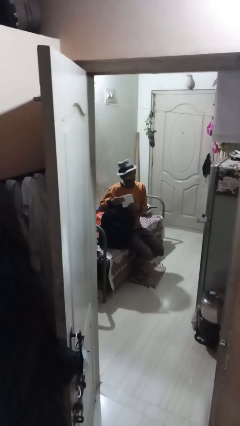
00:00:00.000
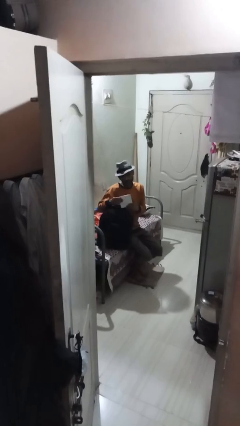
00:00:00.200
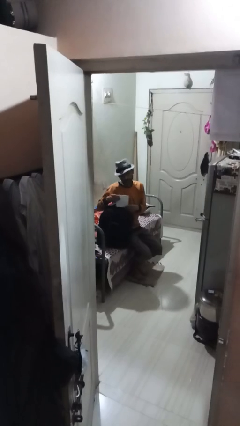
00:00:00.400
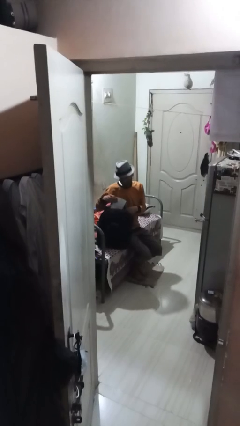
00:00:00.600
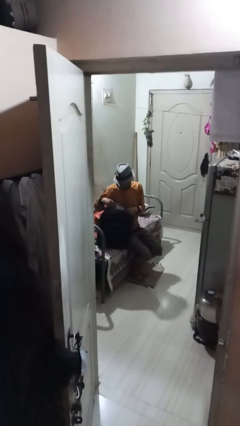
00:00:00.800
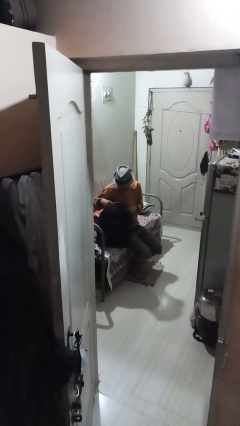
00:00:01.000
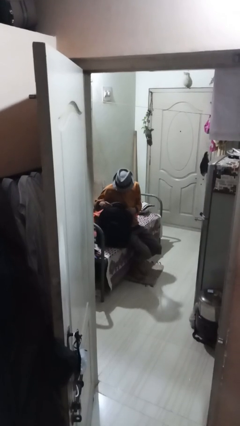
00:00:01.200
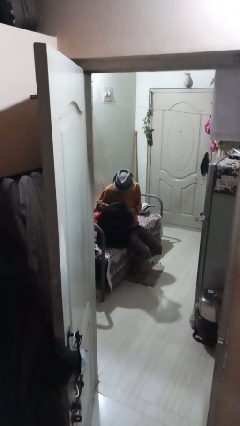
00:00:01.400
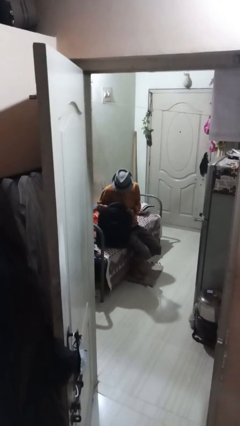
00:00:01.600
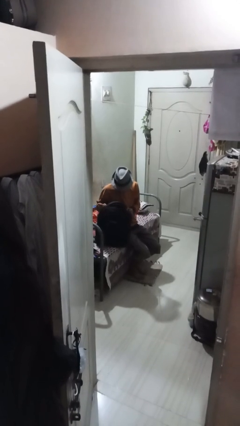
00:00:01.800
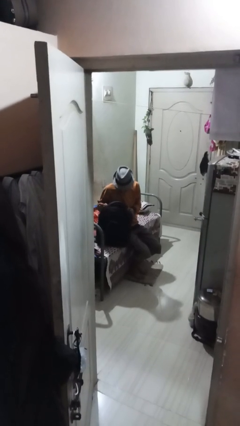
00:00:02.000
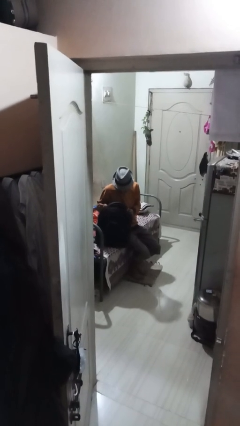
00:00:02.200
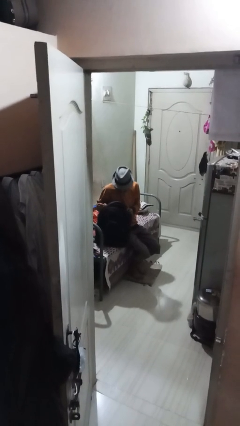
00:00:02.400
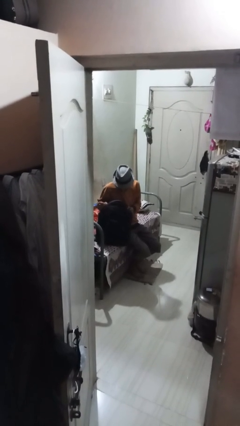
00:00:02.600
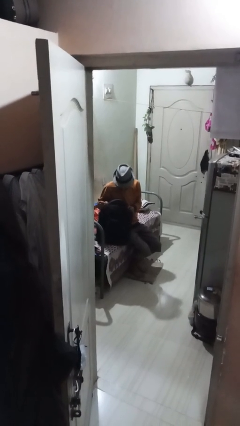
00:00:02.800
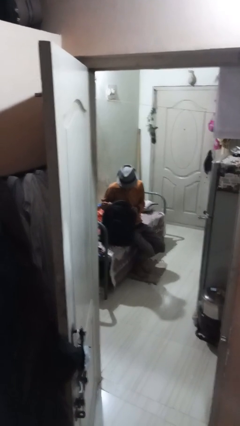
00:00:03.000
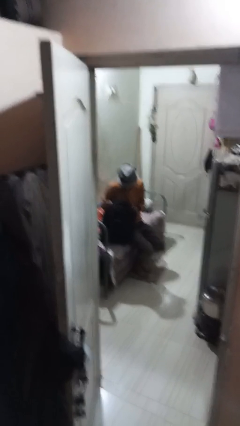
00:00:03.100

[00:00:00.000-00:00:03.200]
person puts object into backpack

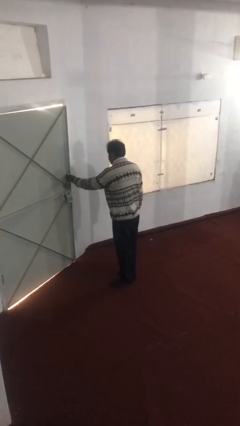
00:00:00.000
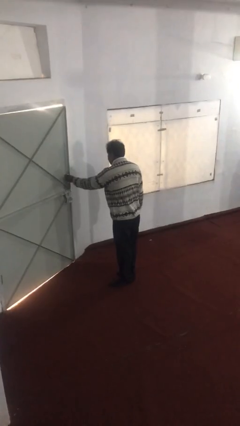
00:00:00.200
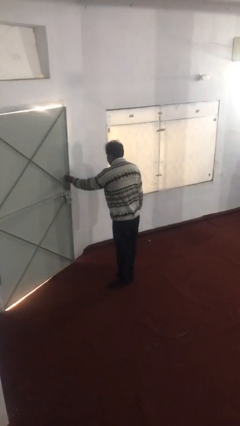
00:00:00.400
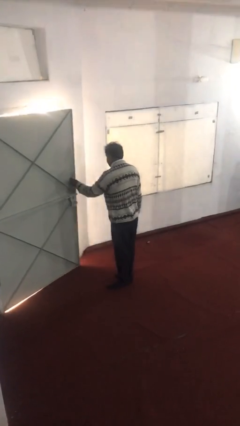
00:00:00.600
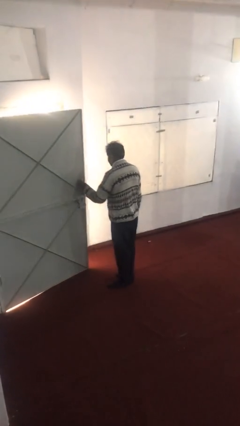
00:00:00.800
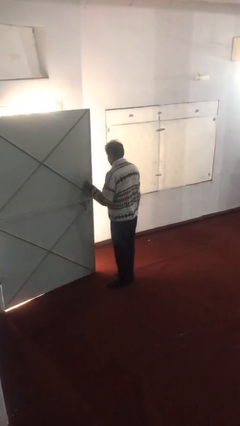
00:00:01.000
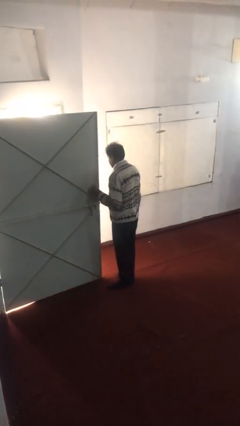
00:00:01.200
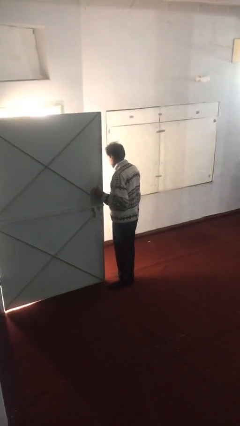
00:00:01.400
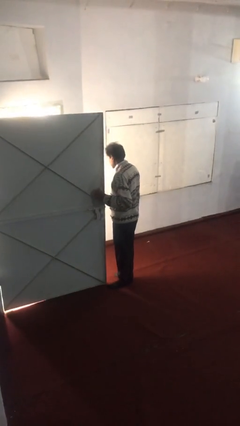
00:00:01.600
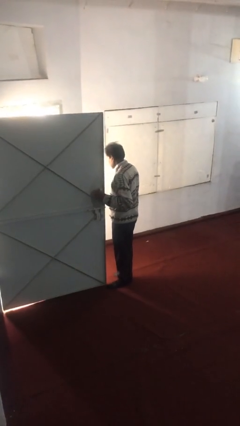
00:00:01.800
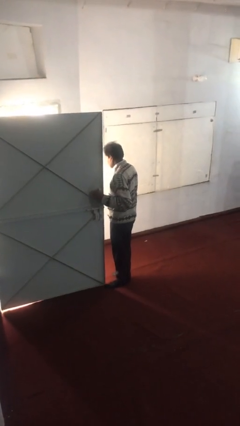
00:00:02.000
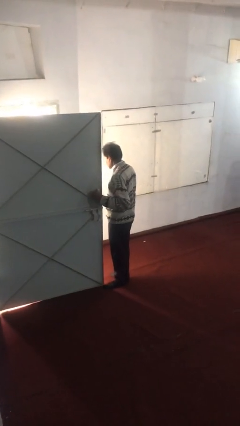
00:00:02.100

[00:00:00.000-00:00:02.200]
person opens facility door

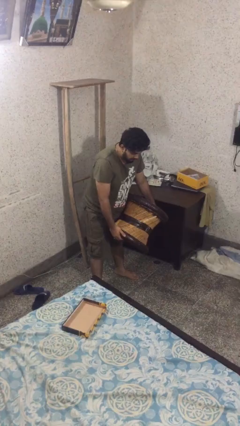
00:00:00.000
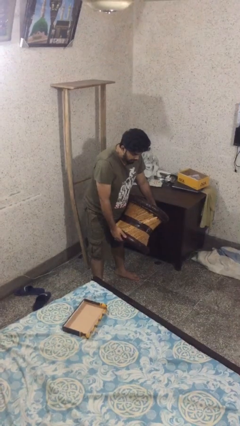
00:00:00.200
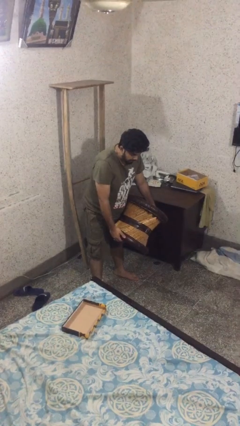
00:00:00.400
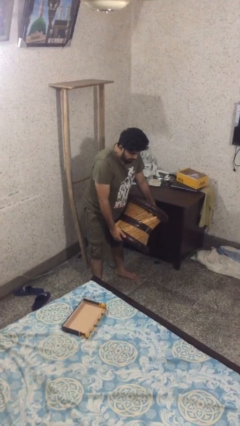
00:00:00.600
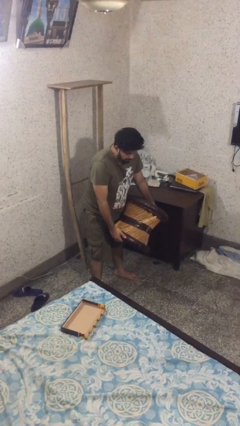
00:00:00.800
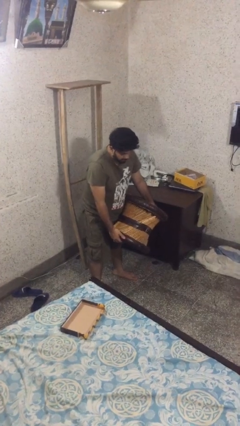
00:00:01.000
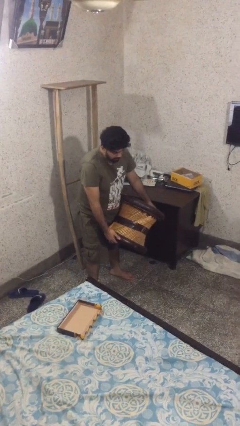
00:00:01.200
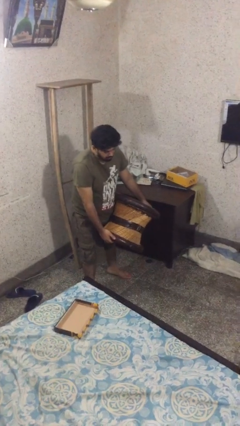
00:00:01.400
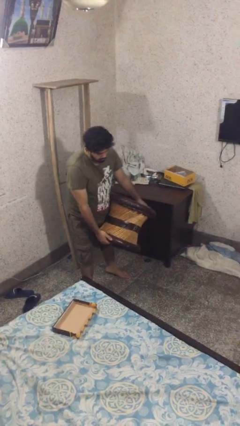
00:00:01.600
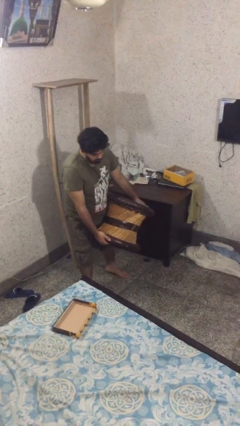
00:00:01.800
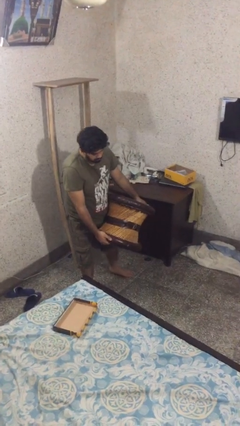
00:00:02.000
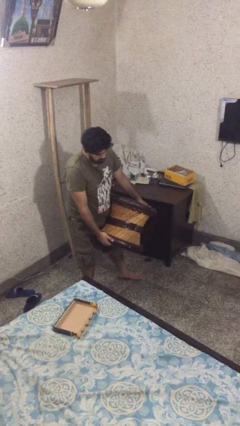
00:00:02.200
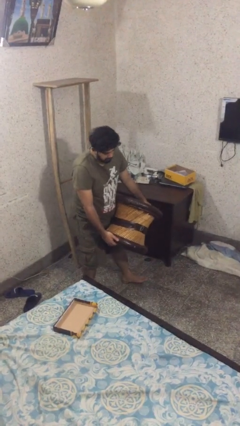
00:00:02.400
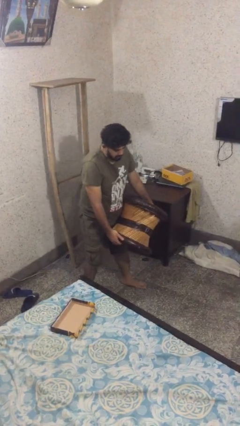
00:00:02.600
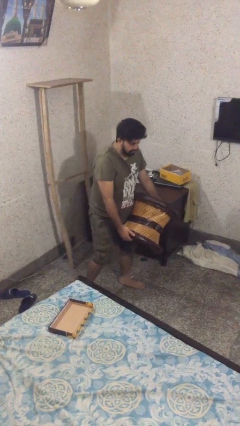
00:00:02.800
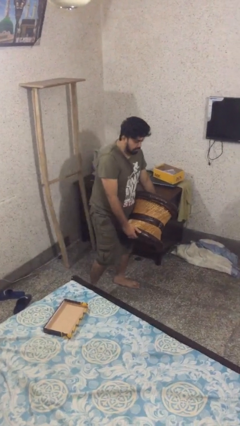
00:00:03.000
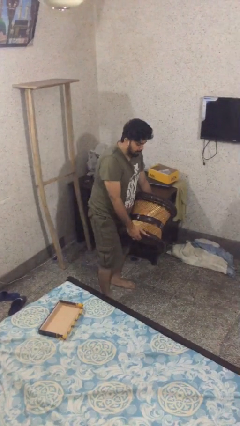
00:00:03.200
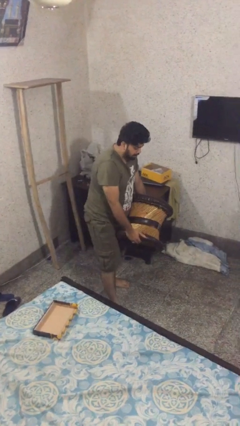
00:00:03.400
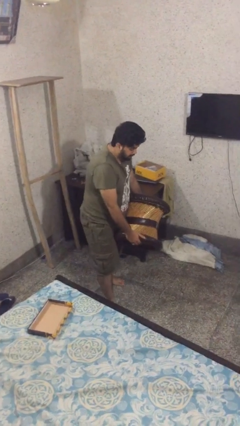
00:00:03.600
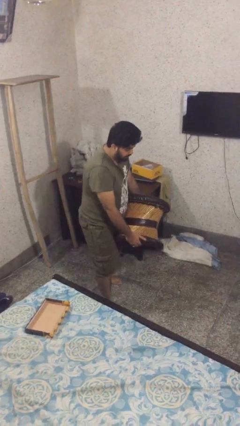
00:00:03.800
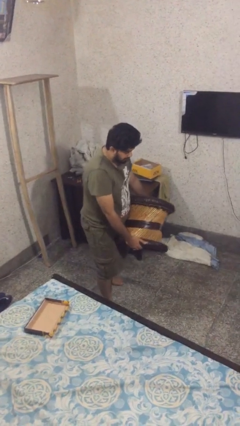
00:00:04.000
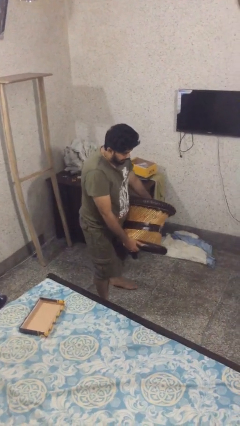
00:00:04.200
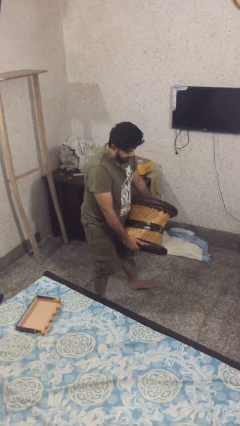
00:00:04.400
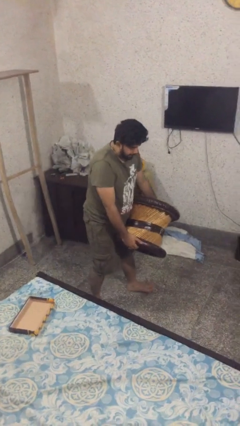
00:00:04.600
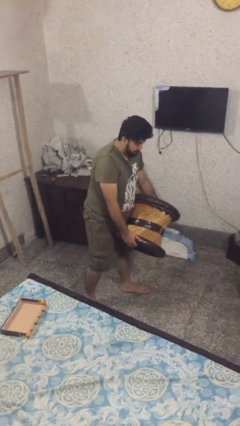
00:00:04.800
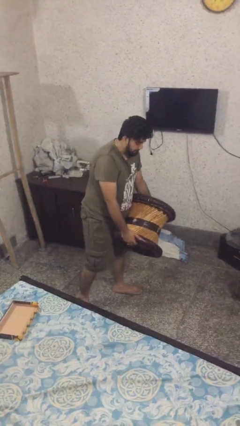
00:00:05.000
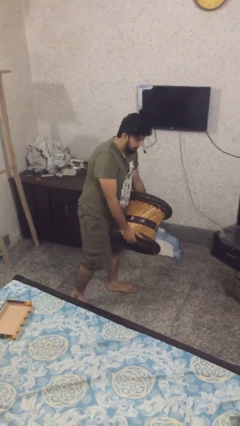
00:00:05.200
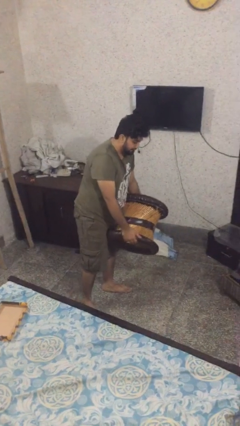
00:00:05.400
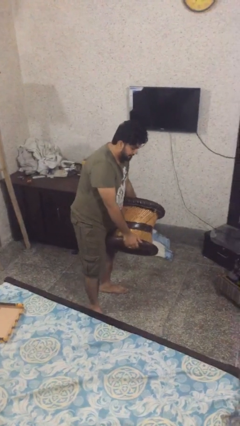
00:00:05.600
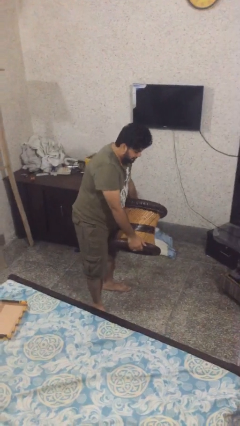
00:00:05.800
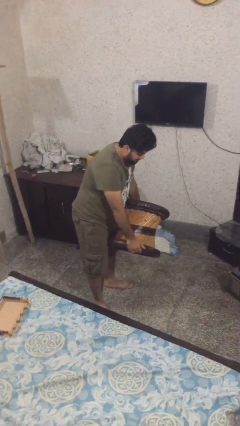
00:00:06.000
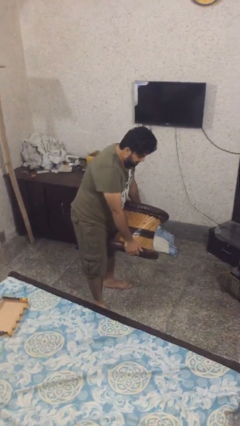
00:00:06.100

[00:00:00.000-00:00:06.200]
person carries heavy object

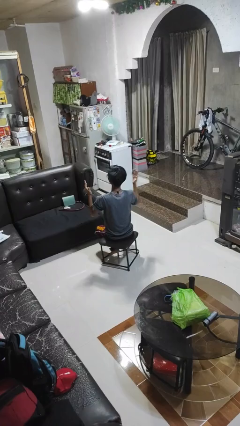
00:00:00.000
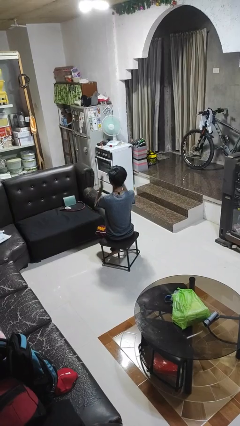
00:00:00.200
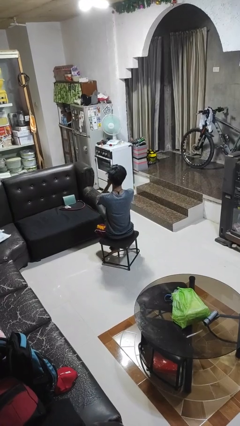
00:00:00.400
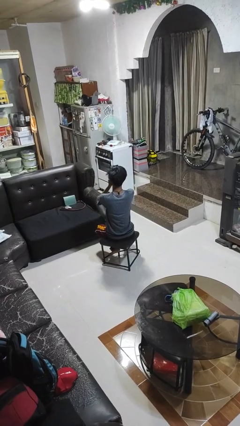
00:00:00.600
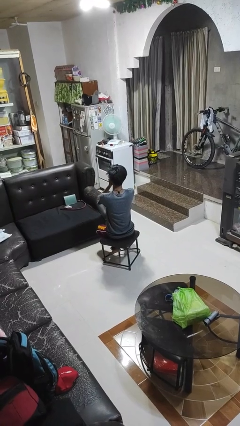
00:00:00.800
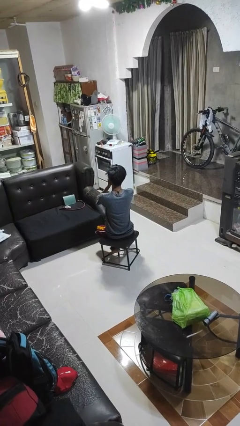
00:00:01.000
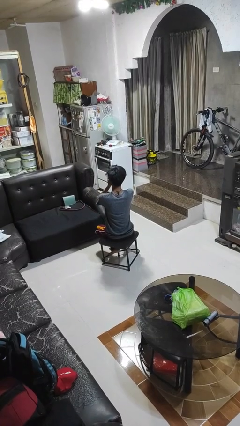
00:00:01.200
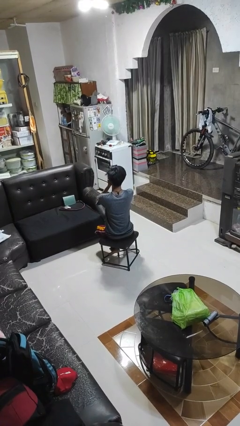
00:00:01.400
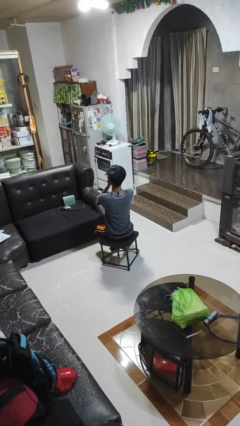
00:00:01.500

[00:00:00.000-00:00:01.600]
person covers face with hands

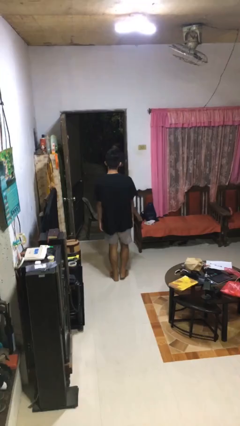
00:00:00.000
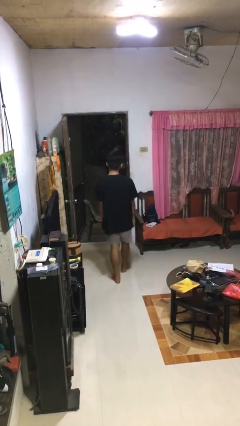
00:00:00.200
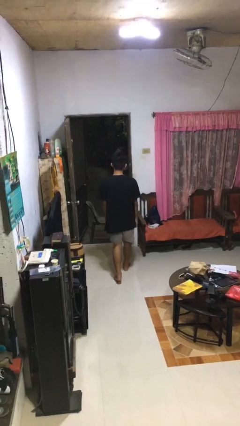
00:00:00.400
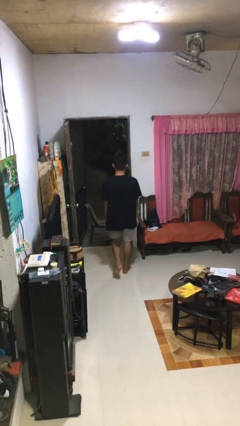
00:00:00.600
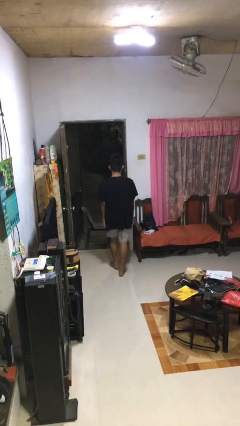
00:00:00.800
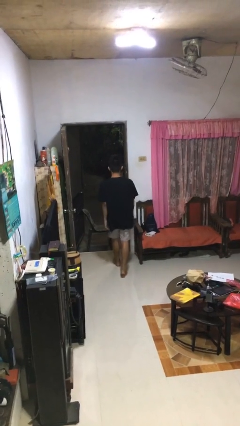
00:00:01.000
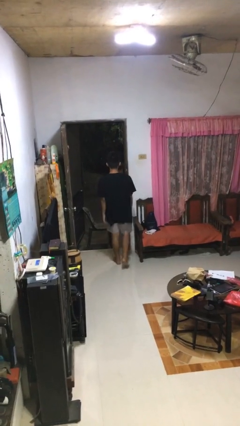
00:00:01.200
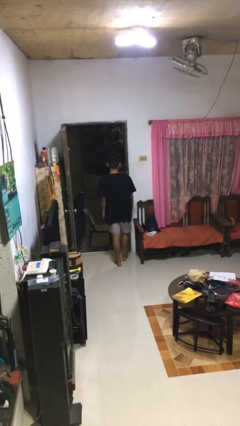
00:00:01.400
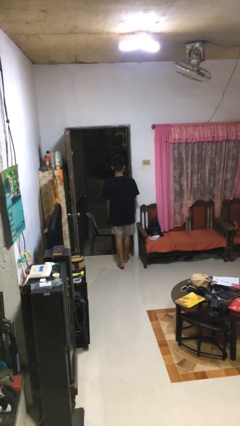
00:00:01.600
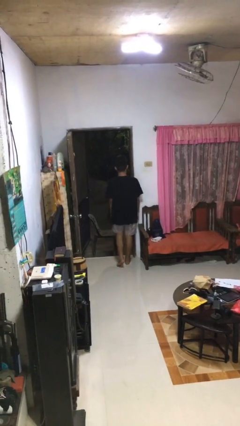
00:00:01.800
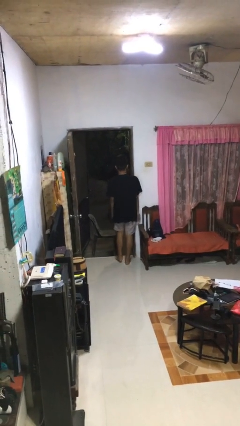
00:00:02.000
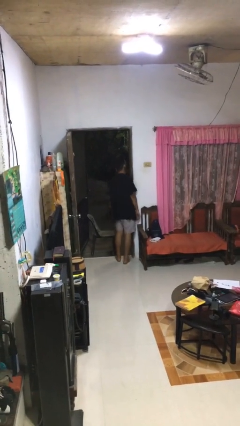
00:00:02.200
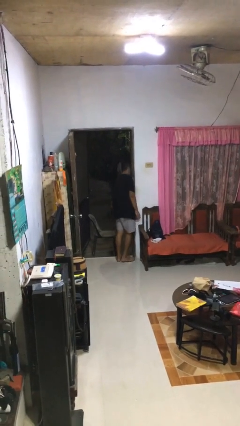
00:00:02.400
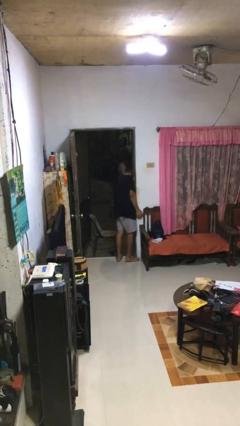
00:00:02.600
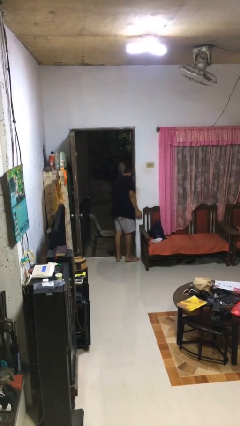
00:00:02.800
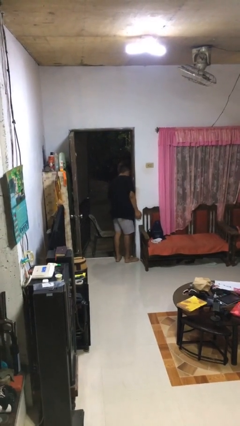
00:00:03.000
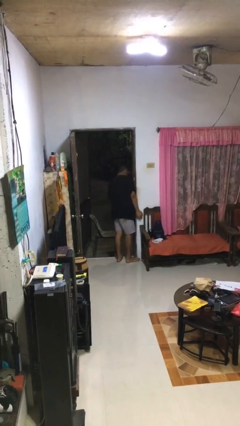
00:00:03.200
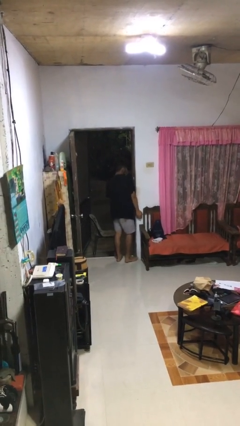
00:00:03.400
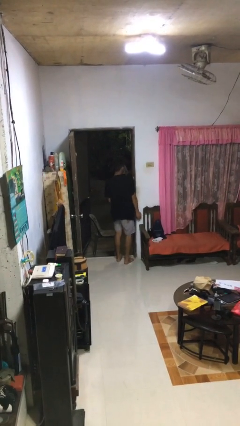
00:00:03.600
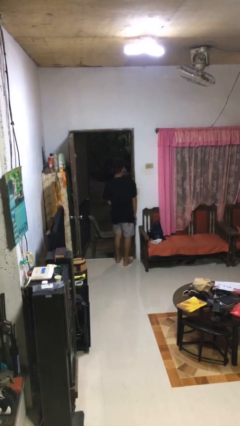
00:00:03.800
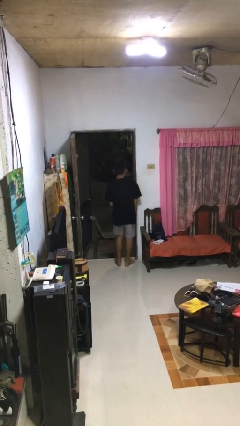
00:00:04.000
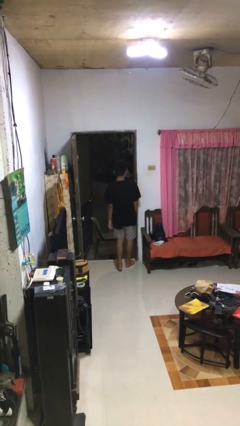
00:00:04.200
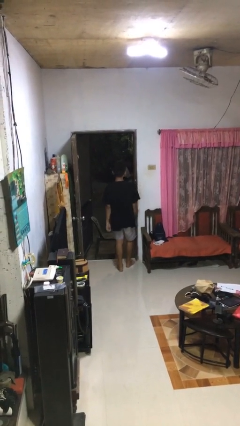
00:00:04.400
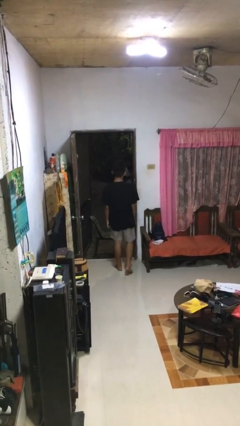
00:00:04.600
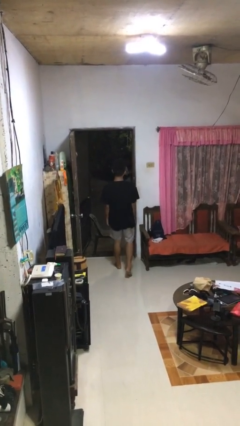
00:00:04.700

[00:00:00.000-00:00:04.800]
person bumps into wall

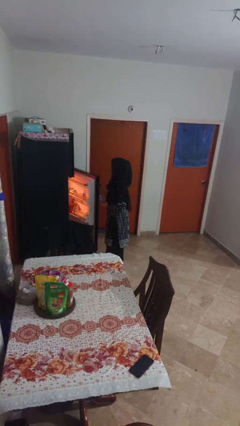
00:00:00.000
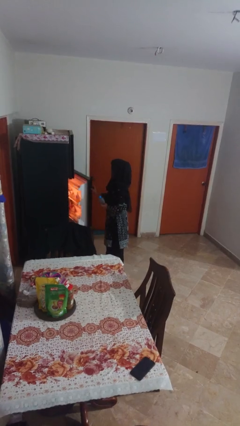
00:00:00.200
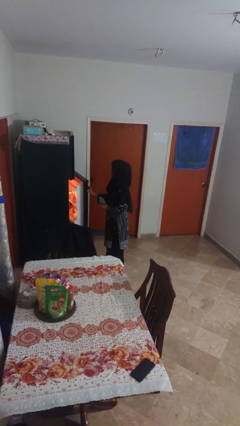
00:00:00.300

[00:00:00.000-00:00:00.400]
person closes refrigerator
